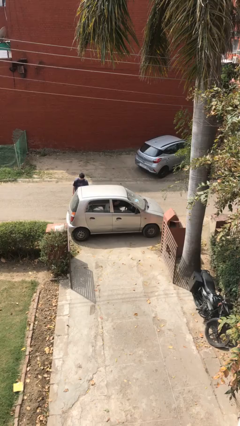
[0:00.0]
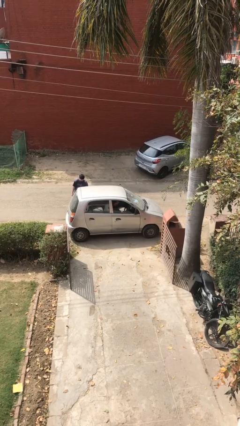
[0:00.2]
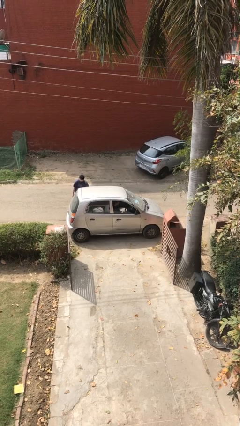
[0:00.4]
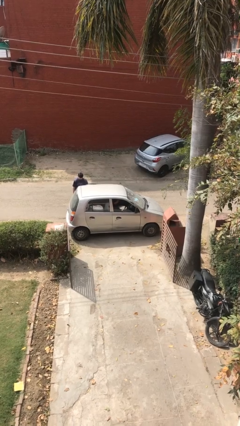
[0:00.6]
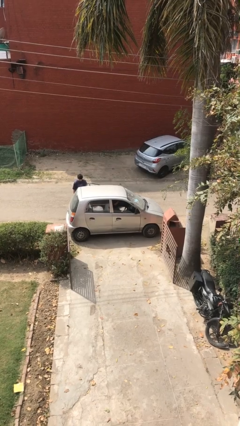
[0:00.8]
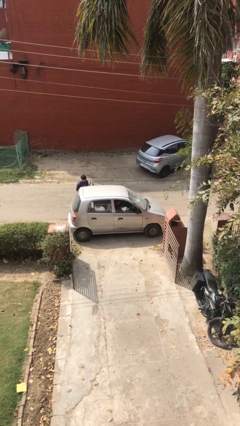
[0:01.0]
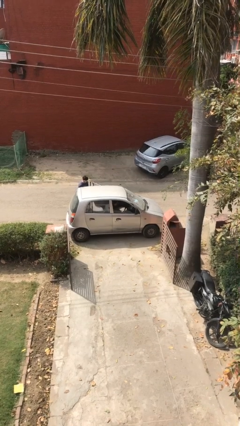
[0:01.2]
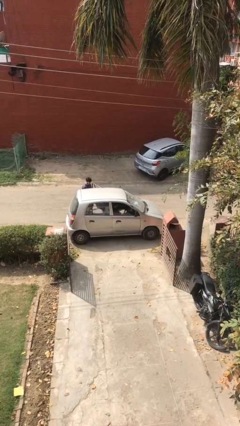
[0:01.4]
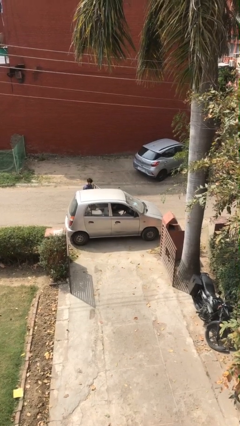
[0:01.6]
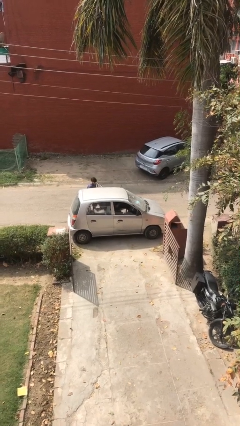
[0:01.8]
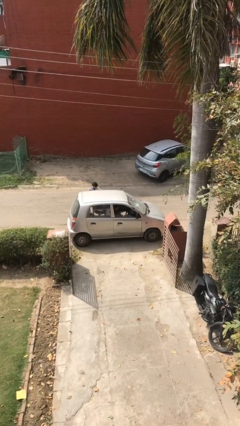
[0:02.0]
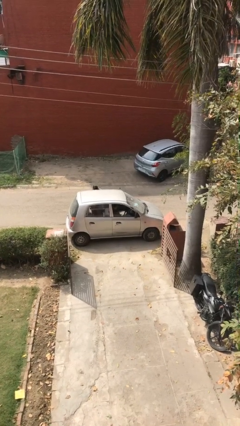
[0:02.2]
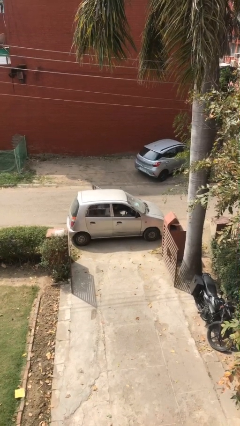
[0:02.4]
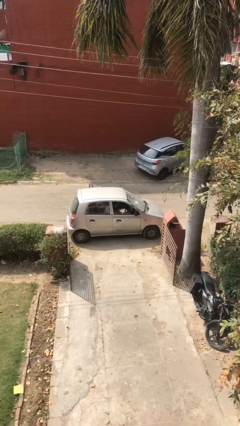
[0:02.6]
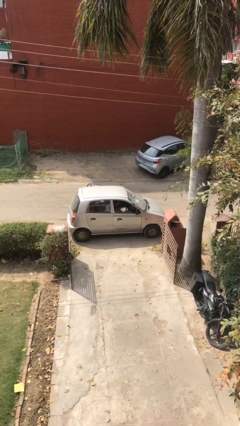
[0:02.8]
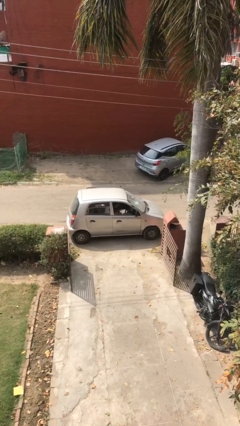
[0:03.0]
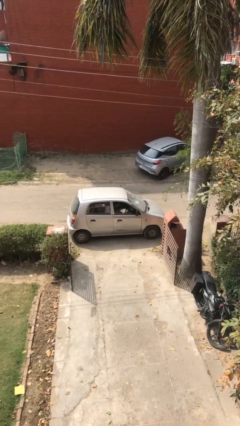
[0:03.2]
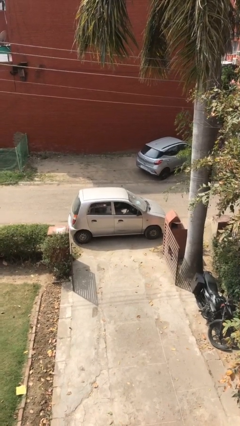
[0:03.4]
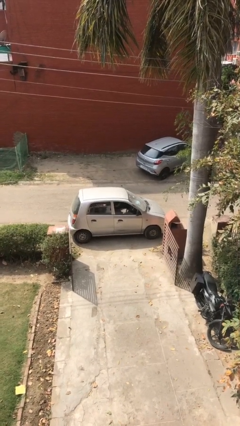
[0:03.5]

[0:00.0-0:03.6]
car picks up person

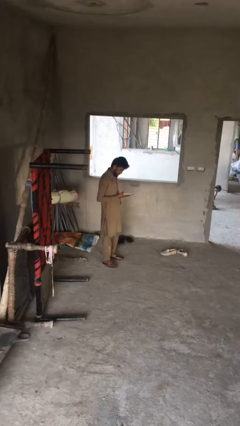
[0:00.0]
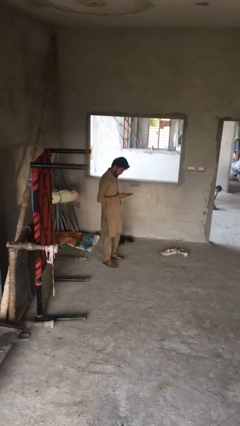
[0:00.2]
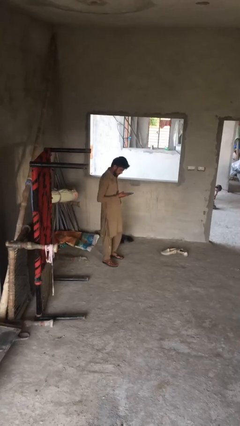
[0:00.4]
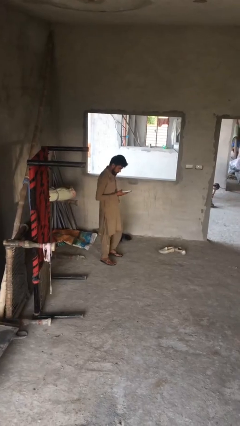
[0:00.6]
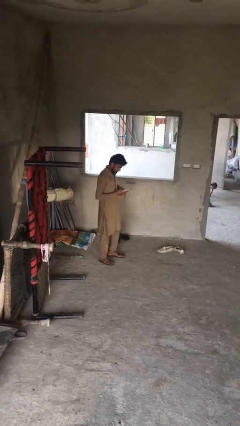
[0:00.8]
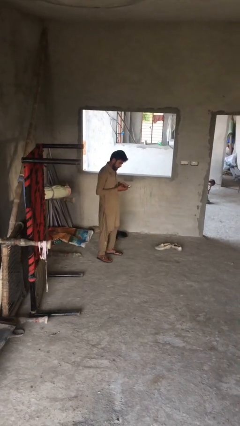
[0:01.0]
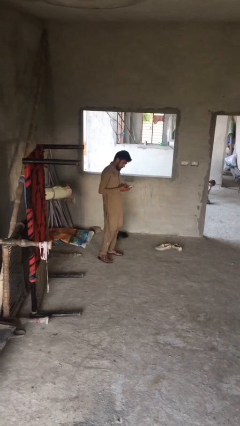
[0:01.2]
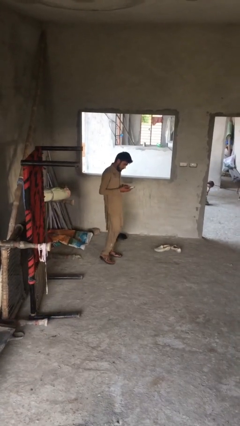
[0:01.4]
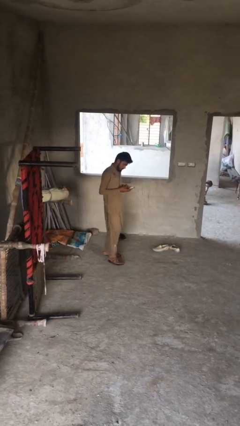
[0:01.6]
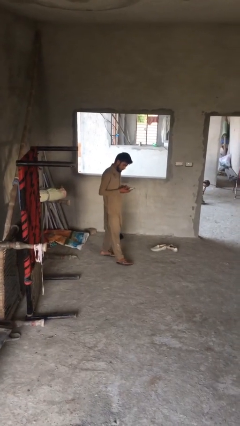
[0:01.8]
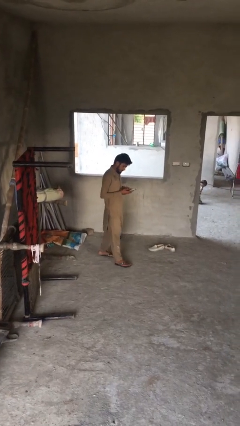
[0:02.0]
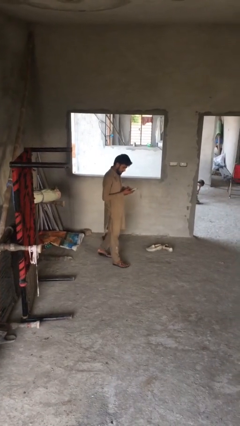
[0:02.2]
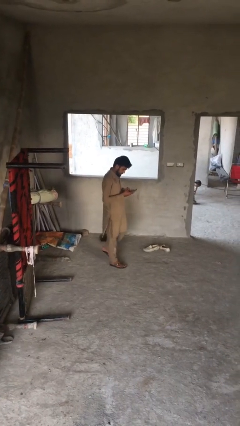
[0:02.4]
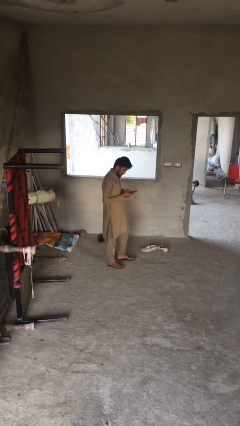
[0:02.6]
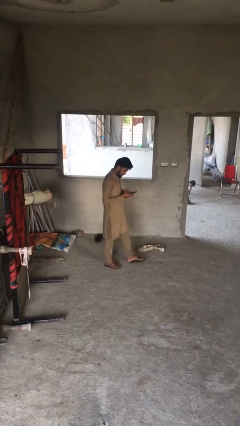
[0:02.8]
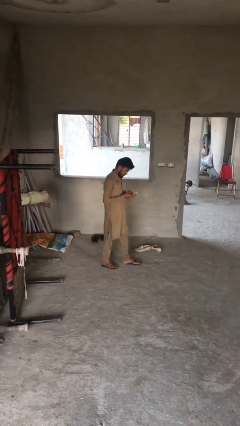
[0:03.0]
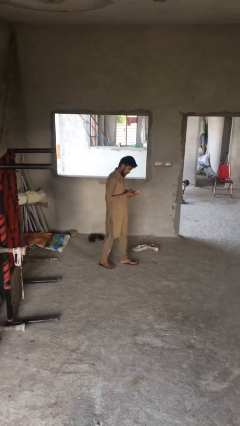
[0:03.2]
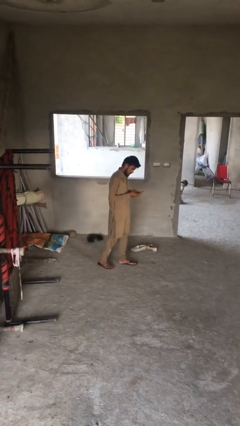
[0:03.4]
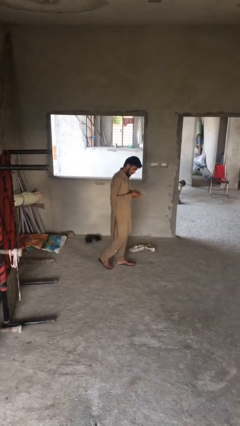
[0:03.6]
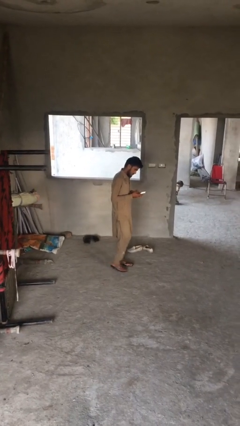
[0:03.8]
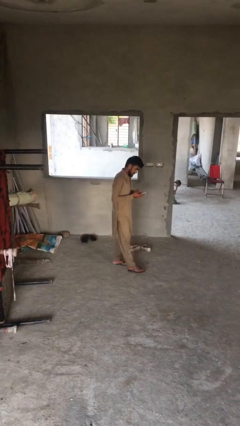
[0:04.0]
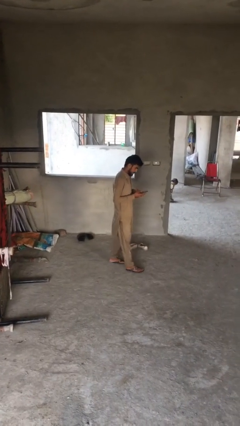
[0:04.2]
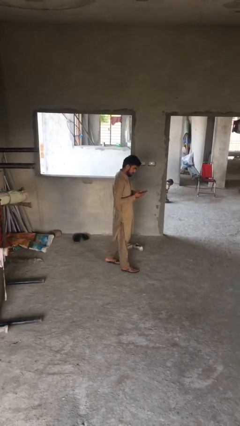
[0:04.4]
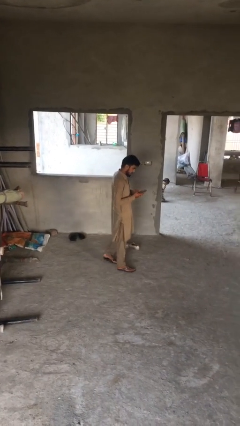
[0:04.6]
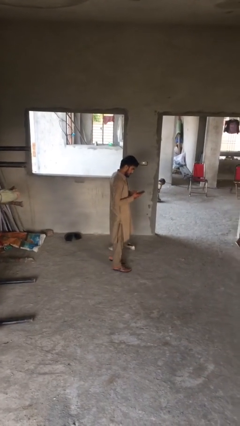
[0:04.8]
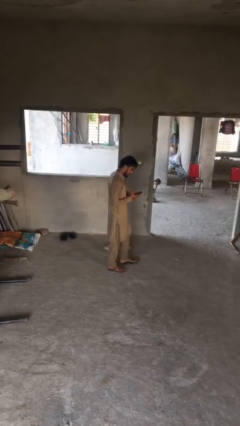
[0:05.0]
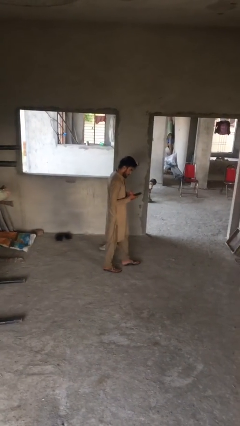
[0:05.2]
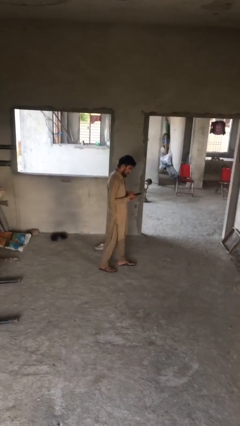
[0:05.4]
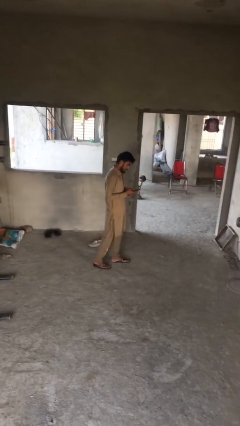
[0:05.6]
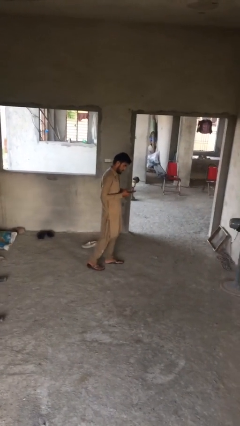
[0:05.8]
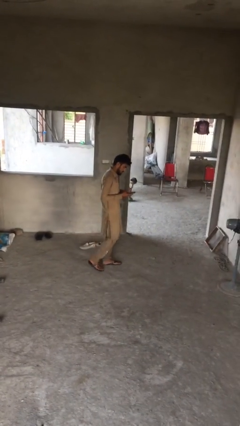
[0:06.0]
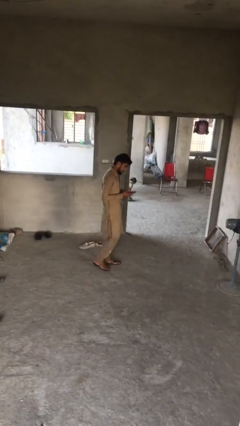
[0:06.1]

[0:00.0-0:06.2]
person texts on phone

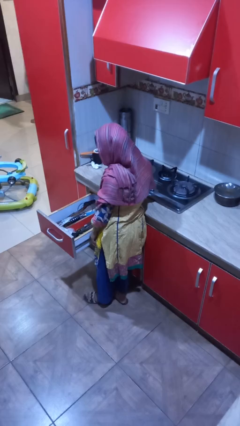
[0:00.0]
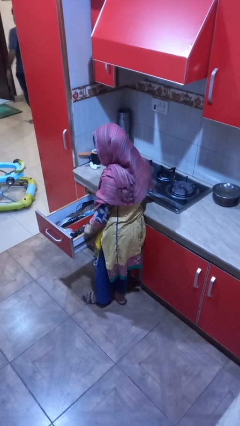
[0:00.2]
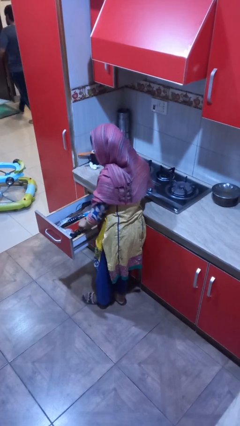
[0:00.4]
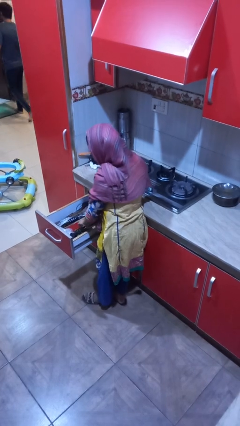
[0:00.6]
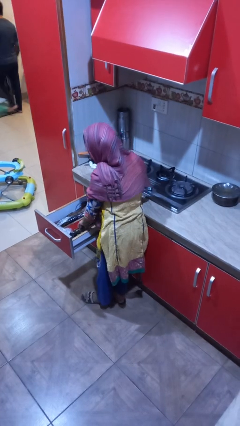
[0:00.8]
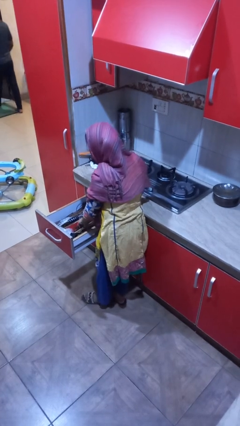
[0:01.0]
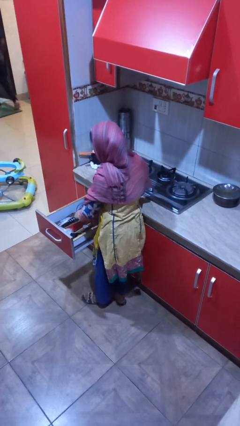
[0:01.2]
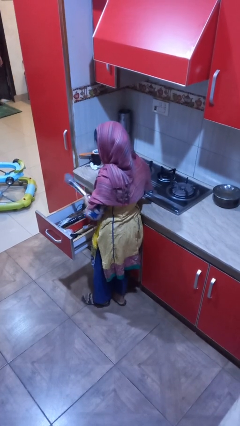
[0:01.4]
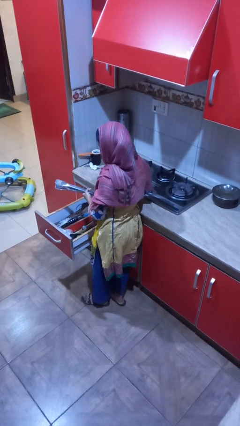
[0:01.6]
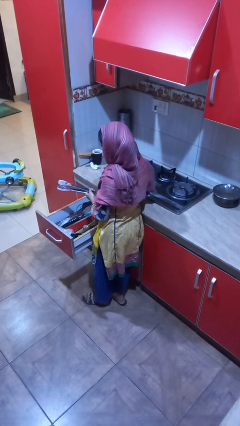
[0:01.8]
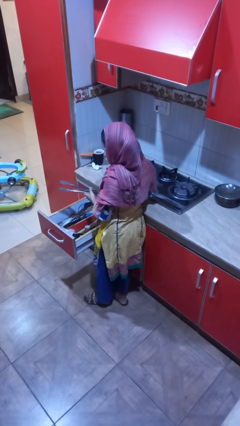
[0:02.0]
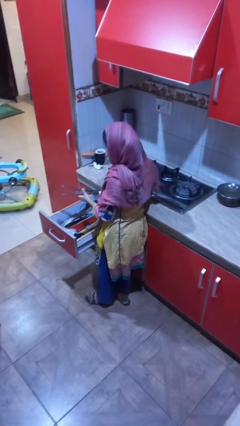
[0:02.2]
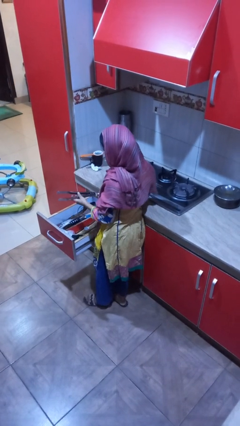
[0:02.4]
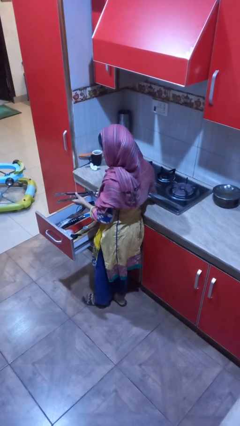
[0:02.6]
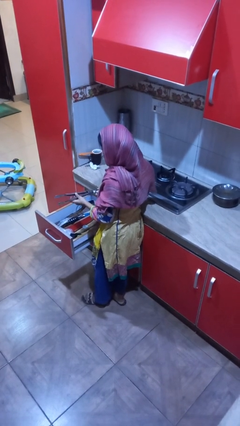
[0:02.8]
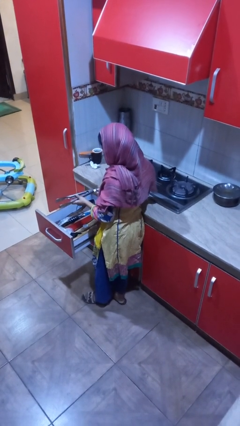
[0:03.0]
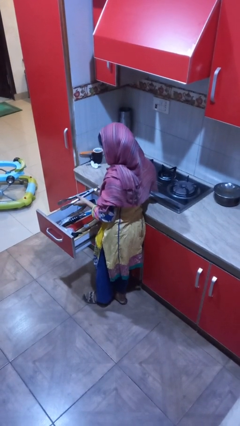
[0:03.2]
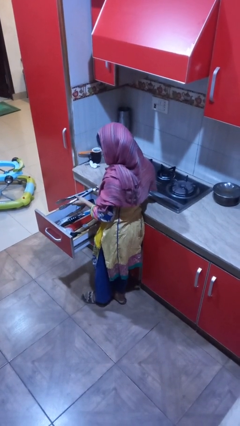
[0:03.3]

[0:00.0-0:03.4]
person takes object from kitchen drawer

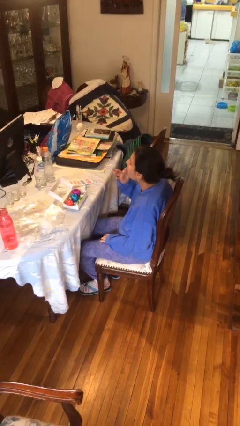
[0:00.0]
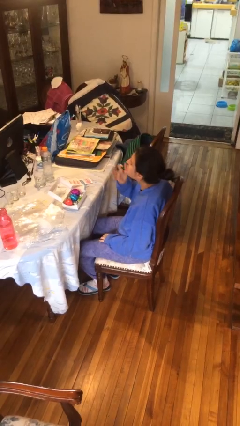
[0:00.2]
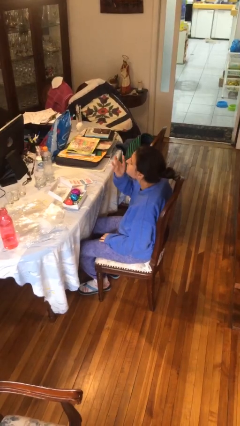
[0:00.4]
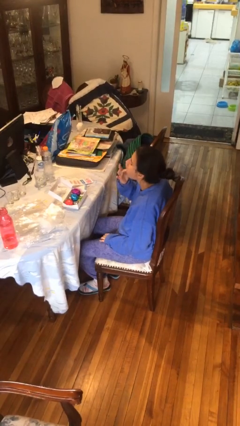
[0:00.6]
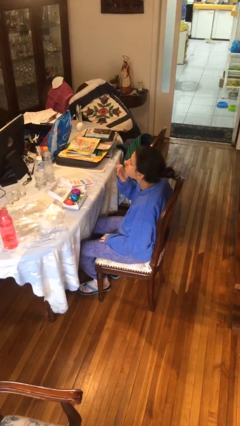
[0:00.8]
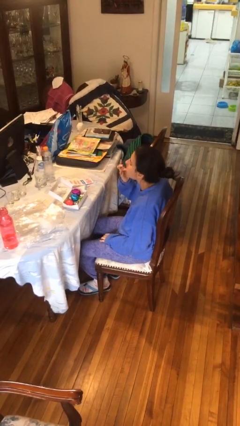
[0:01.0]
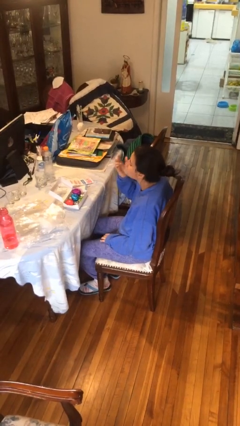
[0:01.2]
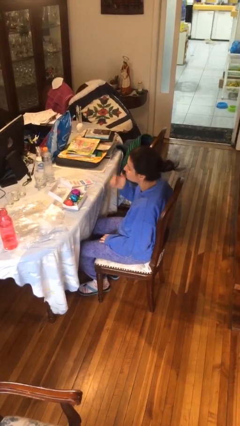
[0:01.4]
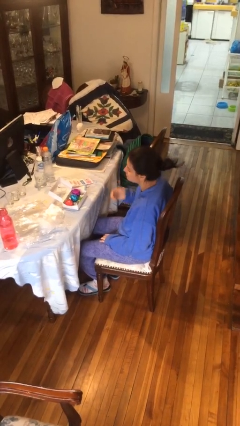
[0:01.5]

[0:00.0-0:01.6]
person licks fingers

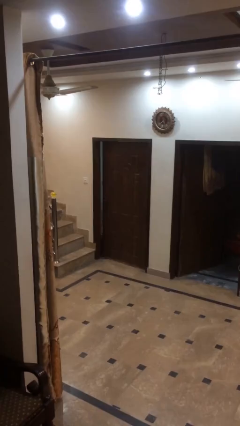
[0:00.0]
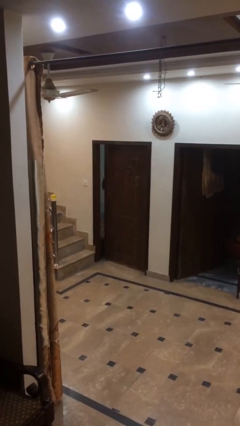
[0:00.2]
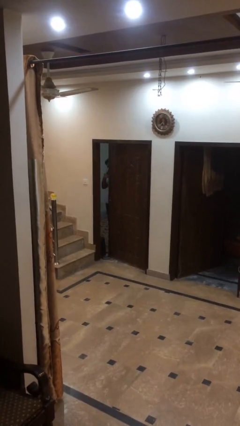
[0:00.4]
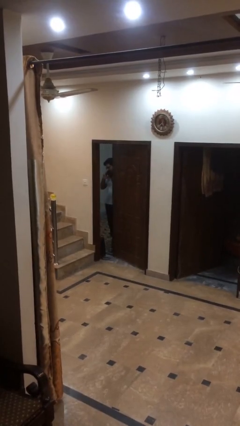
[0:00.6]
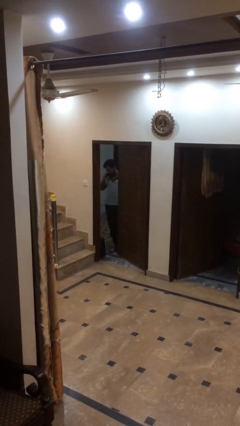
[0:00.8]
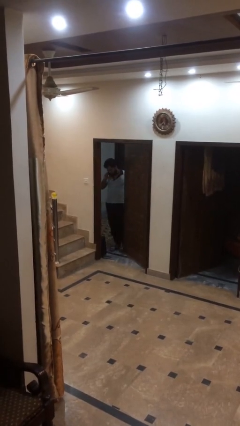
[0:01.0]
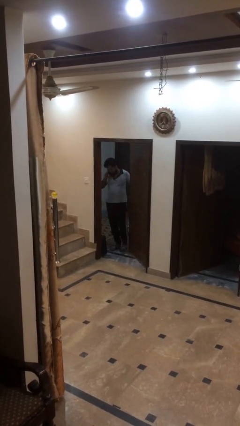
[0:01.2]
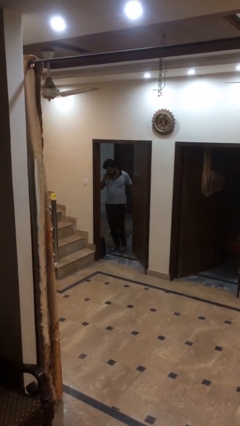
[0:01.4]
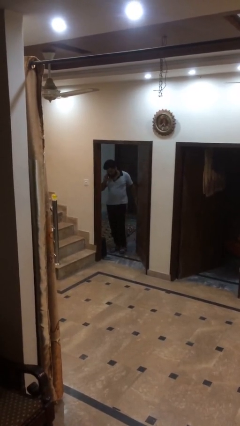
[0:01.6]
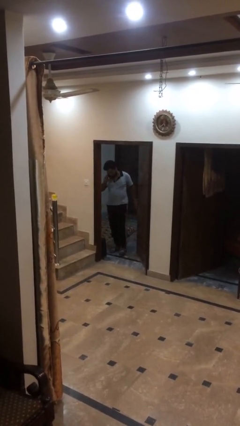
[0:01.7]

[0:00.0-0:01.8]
person opens facility door

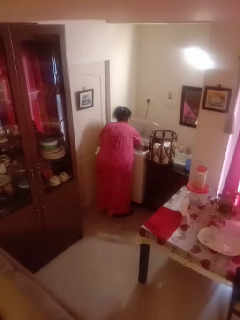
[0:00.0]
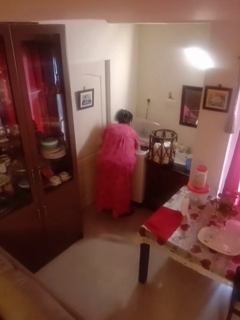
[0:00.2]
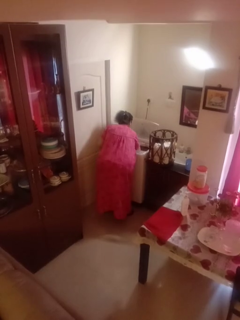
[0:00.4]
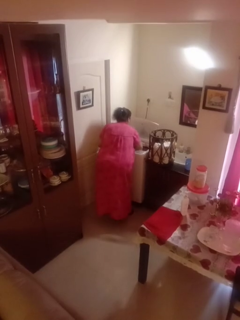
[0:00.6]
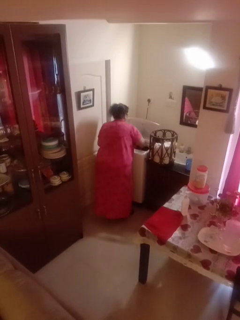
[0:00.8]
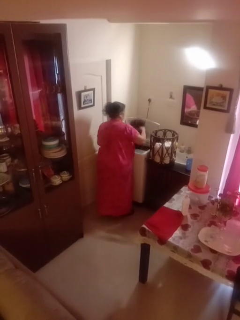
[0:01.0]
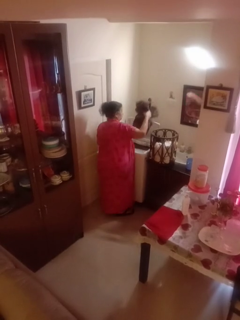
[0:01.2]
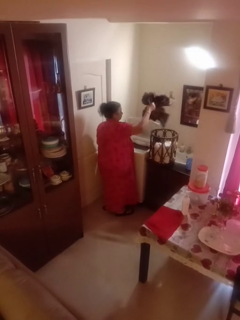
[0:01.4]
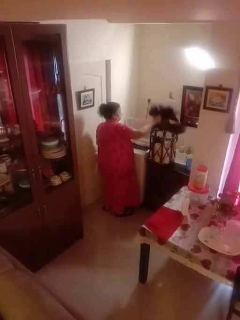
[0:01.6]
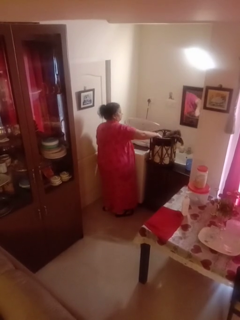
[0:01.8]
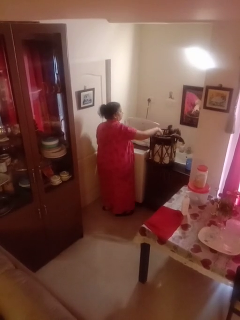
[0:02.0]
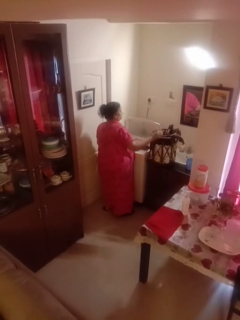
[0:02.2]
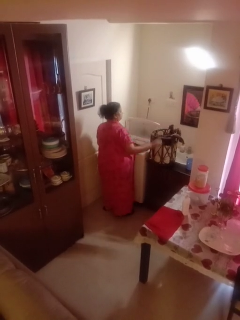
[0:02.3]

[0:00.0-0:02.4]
person unloads dryer
